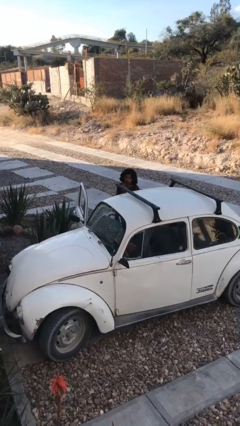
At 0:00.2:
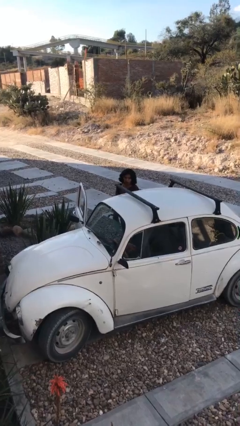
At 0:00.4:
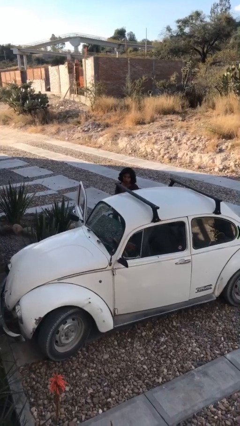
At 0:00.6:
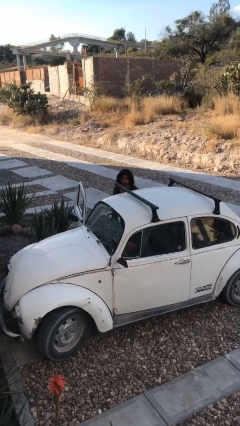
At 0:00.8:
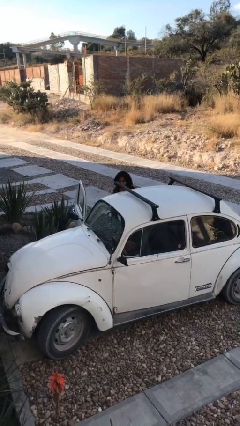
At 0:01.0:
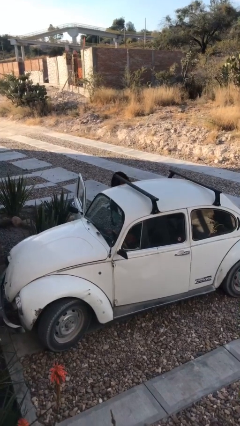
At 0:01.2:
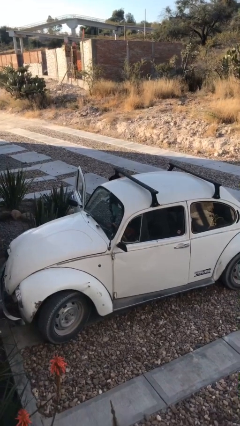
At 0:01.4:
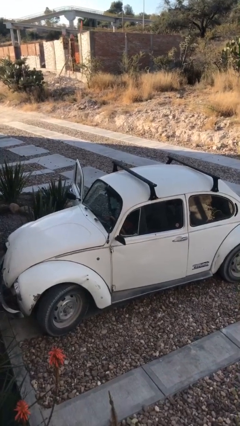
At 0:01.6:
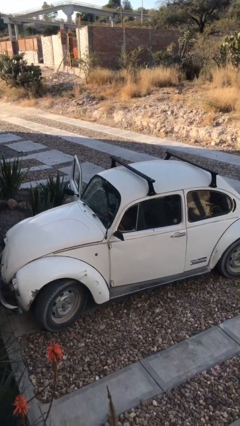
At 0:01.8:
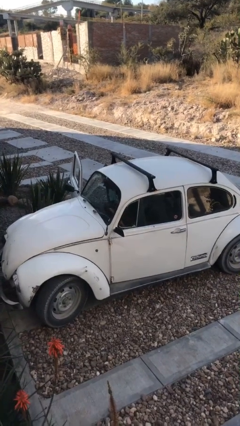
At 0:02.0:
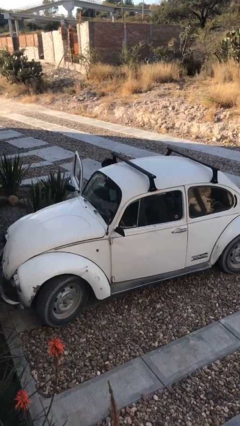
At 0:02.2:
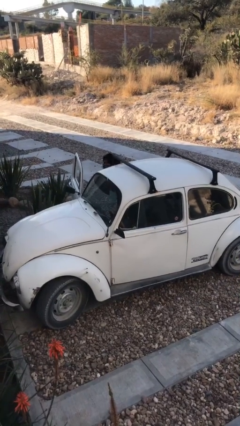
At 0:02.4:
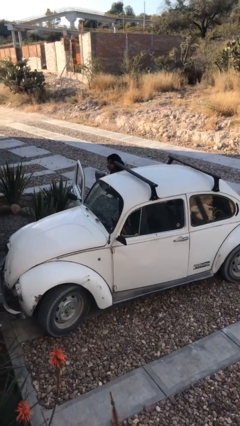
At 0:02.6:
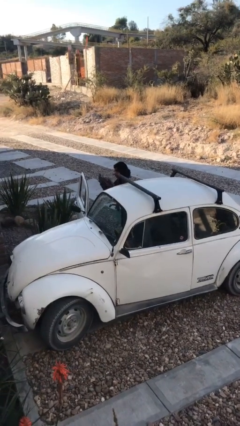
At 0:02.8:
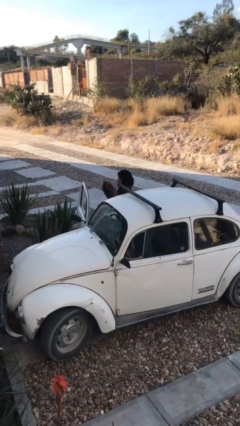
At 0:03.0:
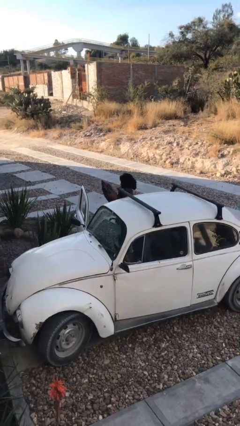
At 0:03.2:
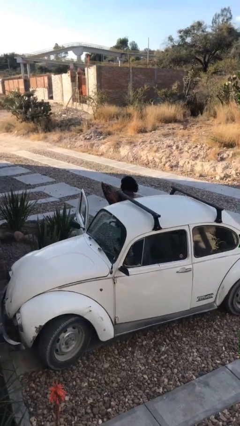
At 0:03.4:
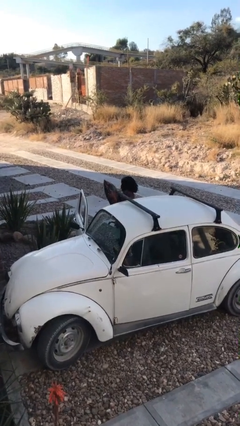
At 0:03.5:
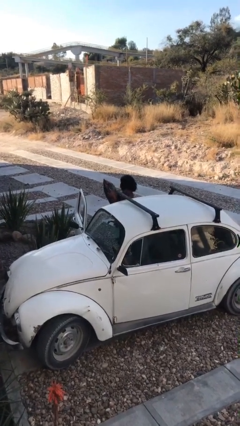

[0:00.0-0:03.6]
person unloads car

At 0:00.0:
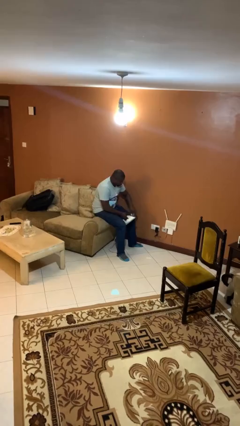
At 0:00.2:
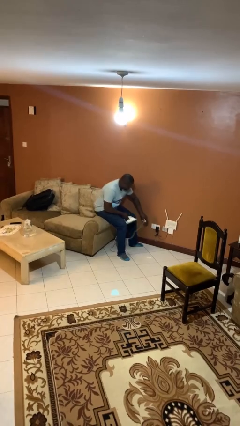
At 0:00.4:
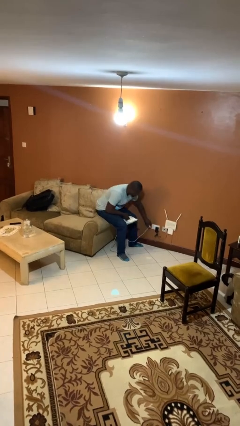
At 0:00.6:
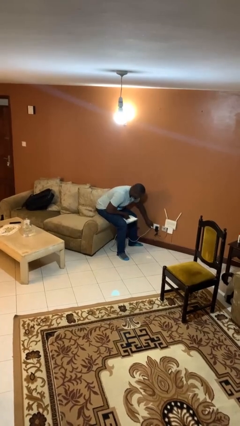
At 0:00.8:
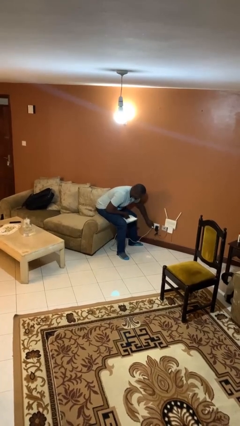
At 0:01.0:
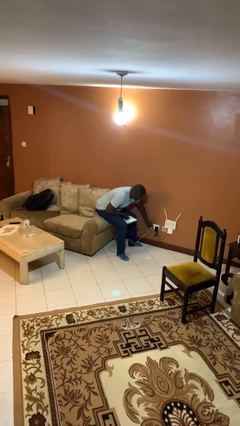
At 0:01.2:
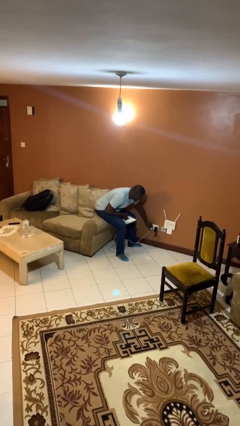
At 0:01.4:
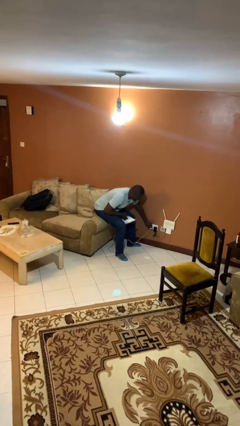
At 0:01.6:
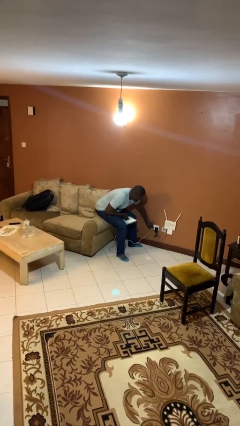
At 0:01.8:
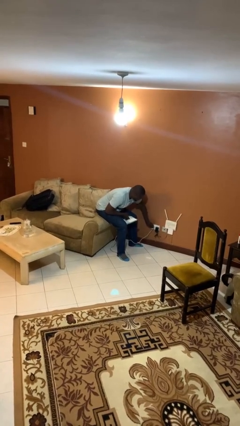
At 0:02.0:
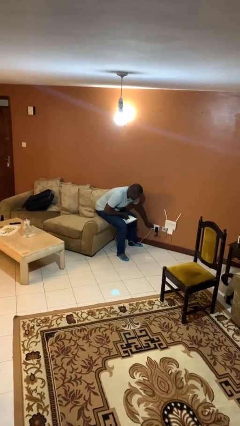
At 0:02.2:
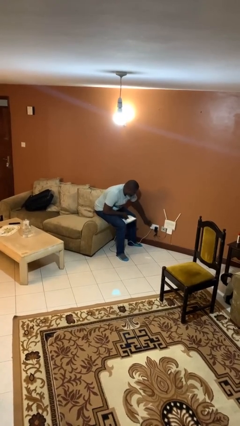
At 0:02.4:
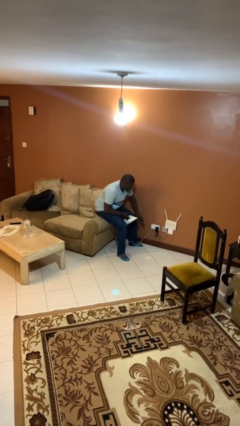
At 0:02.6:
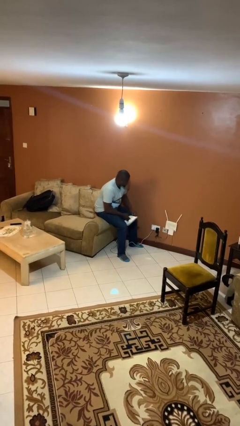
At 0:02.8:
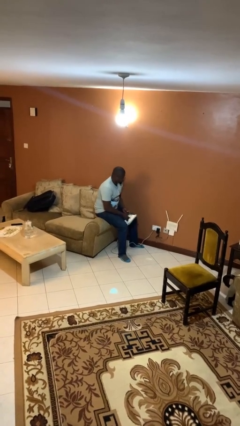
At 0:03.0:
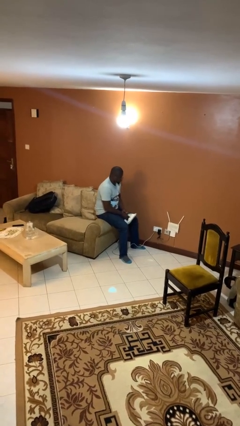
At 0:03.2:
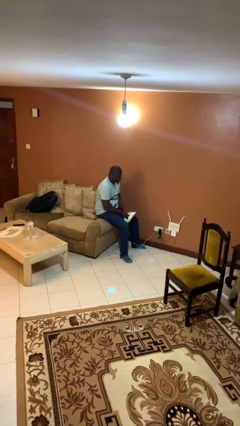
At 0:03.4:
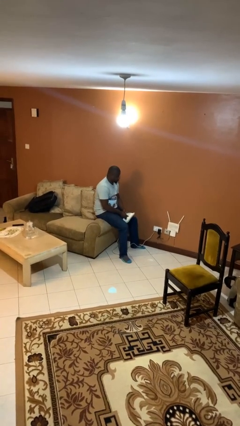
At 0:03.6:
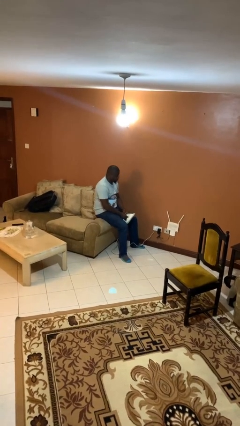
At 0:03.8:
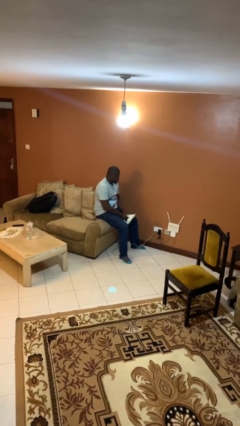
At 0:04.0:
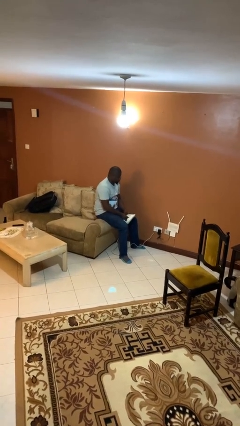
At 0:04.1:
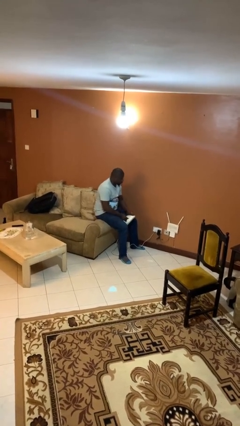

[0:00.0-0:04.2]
person plugs into electrical socket

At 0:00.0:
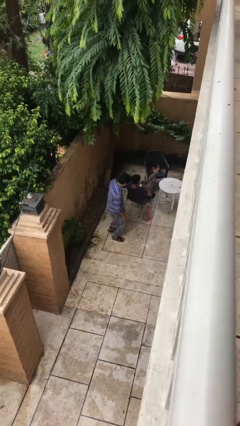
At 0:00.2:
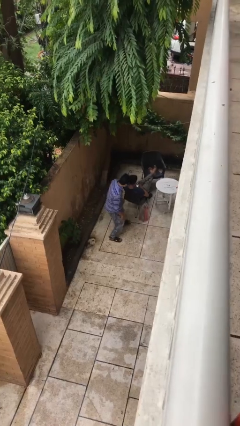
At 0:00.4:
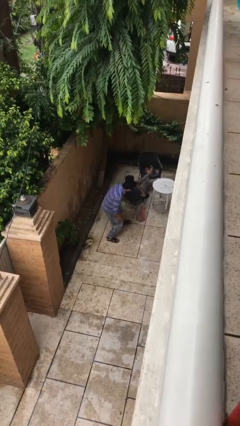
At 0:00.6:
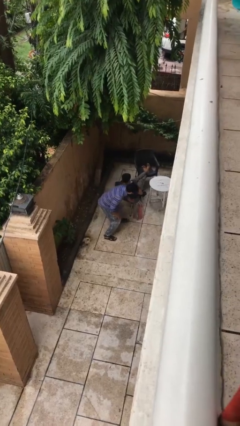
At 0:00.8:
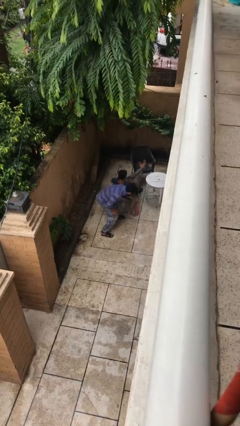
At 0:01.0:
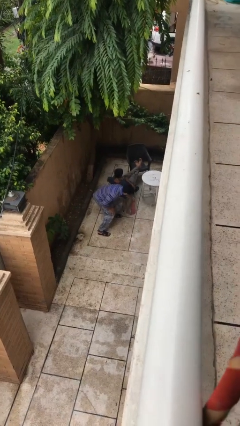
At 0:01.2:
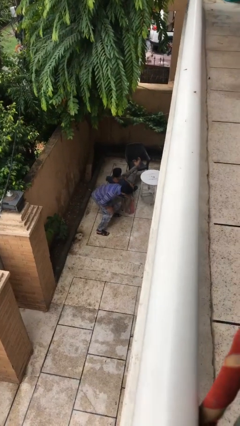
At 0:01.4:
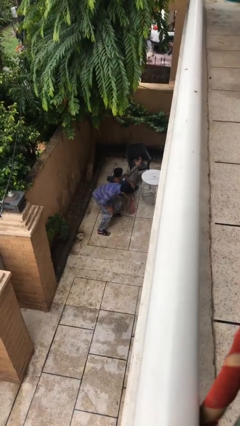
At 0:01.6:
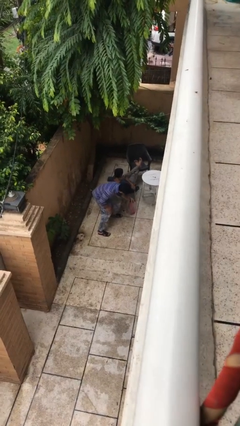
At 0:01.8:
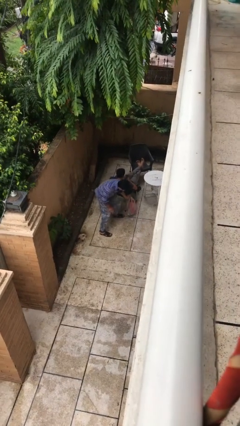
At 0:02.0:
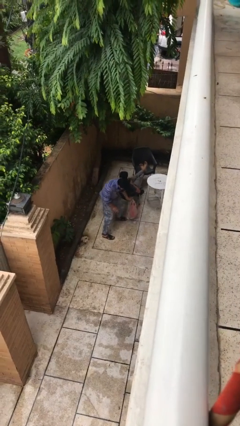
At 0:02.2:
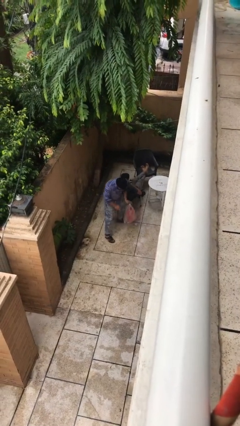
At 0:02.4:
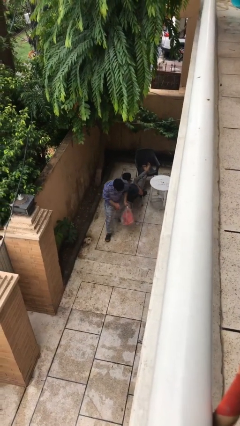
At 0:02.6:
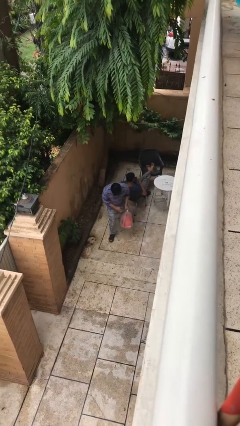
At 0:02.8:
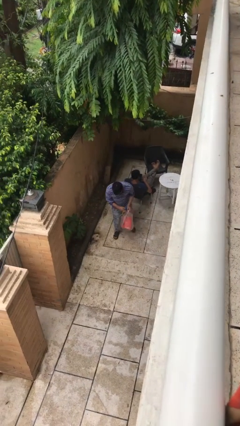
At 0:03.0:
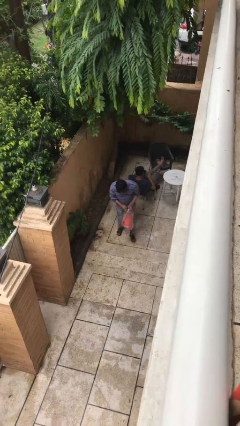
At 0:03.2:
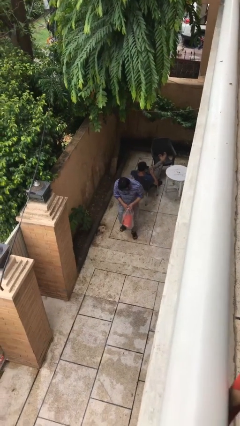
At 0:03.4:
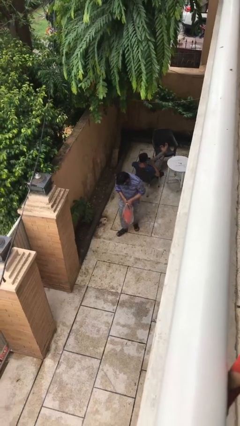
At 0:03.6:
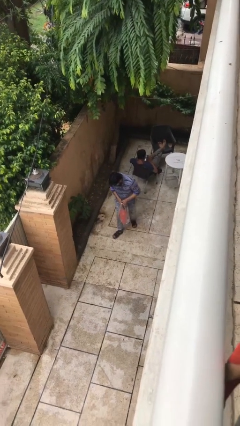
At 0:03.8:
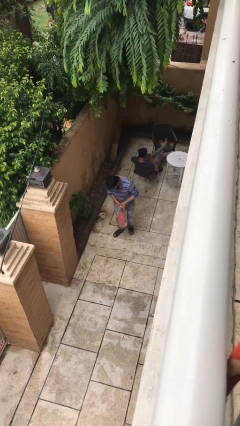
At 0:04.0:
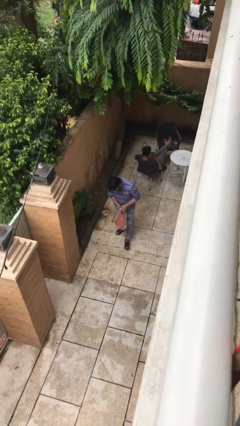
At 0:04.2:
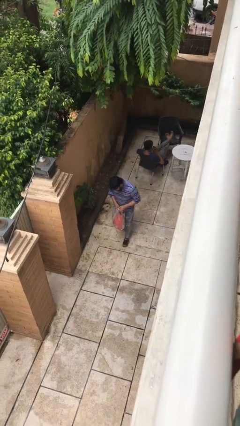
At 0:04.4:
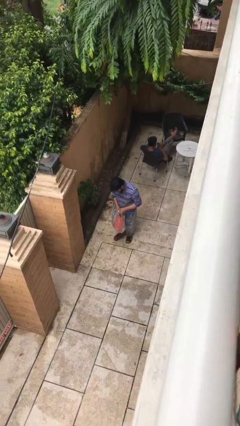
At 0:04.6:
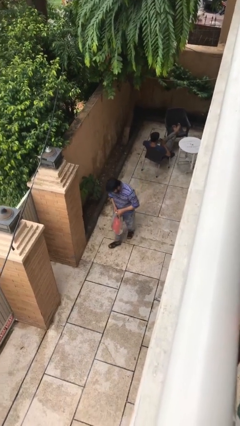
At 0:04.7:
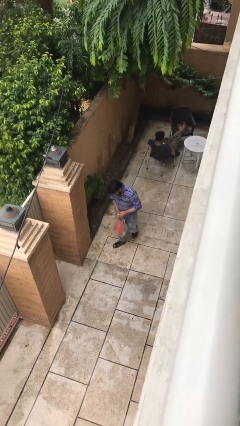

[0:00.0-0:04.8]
person steals object from person

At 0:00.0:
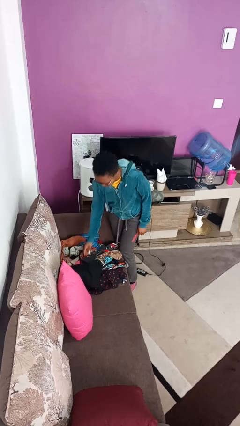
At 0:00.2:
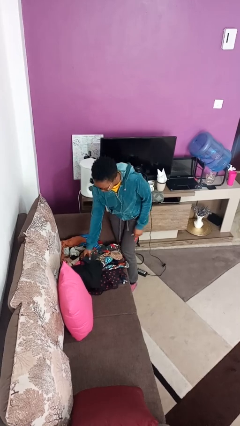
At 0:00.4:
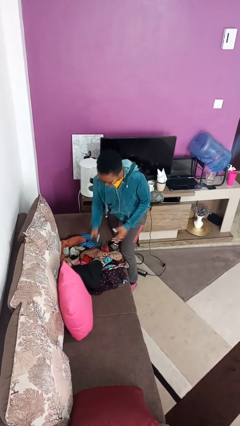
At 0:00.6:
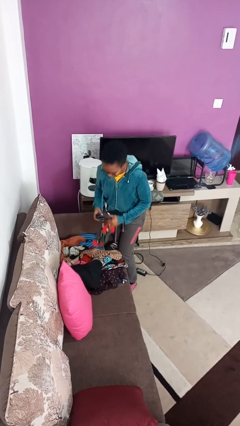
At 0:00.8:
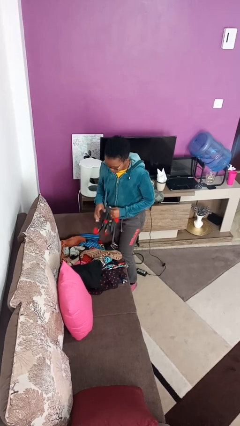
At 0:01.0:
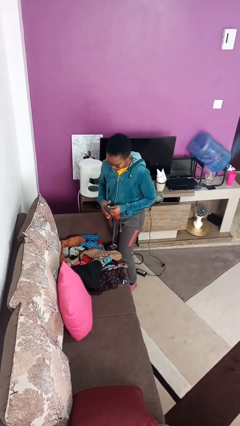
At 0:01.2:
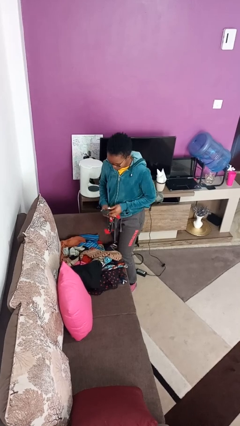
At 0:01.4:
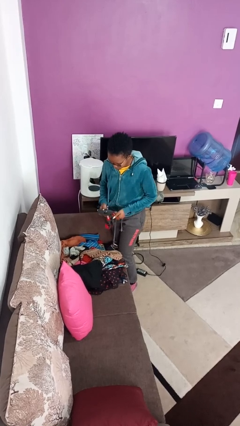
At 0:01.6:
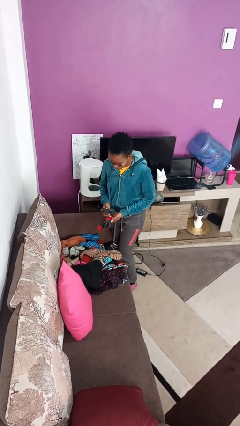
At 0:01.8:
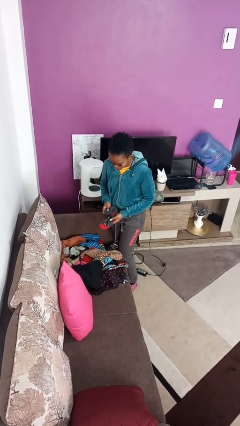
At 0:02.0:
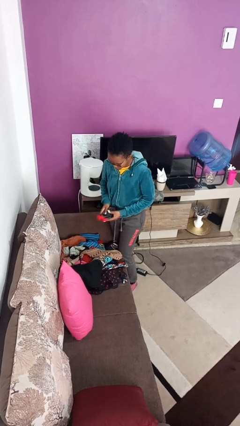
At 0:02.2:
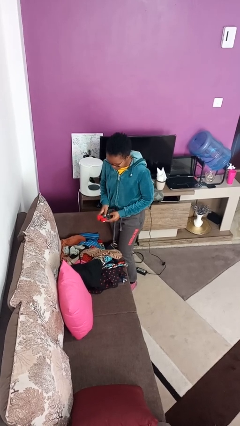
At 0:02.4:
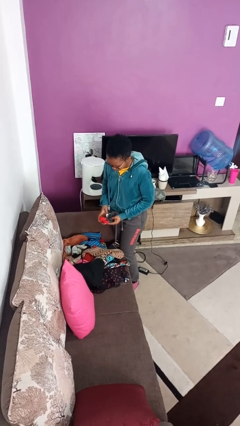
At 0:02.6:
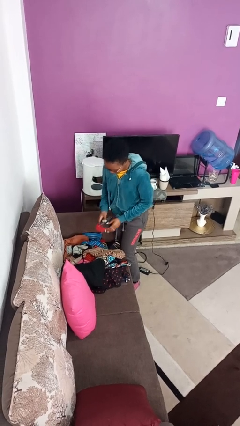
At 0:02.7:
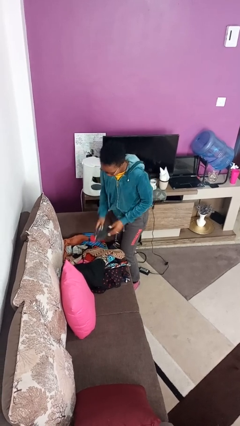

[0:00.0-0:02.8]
person folds socks

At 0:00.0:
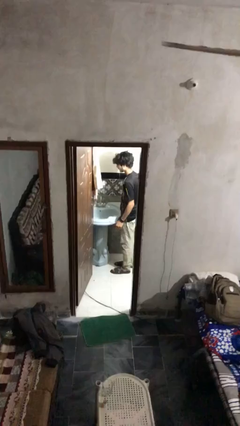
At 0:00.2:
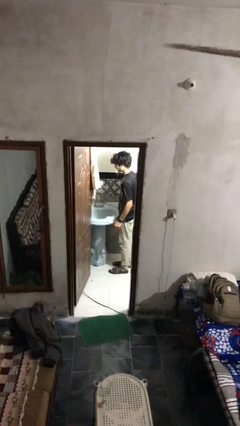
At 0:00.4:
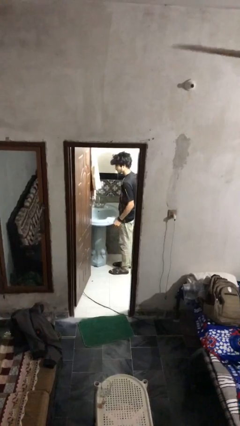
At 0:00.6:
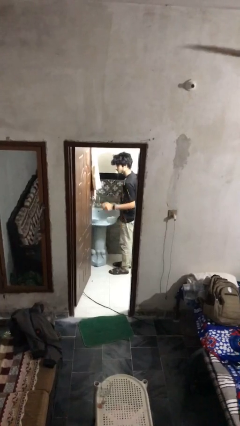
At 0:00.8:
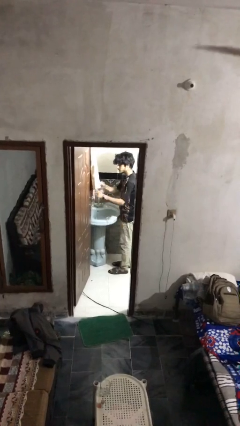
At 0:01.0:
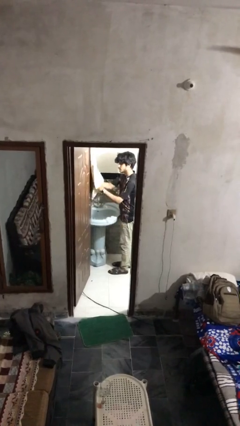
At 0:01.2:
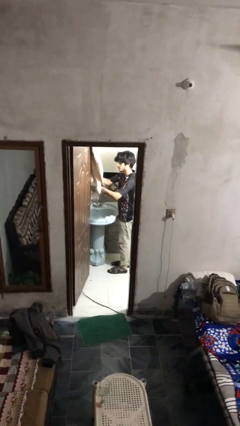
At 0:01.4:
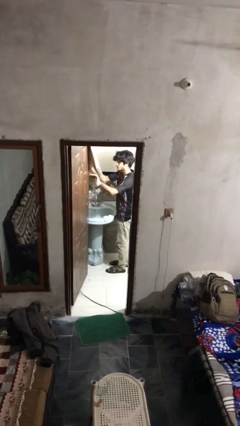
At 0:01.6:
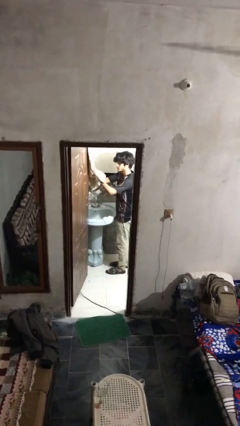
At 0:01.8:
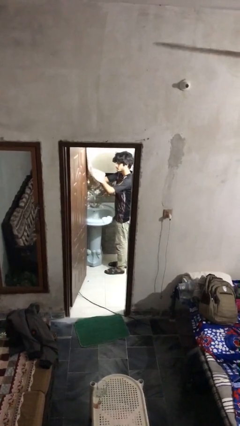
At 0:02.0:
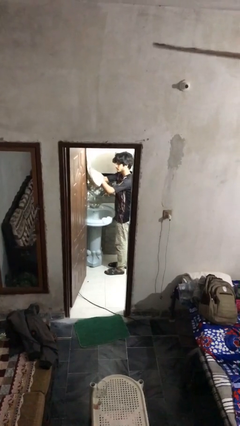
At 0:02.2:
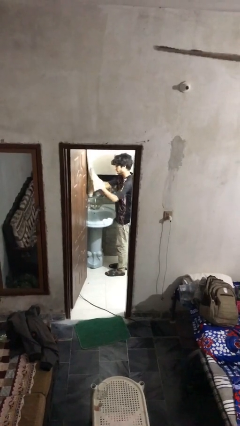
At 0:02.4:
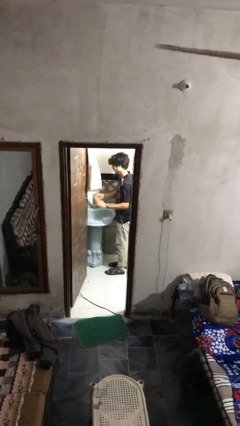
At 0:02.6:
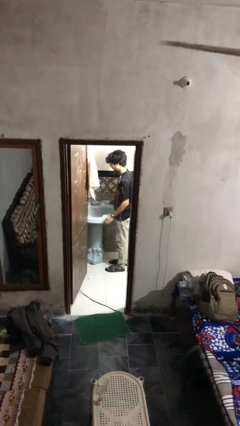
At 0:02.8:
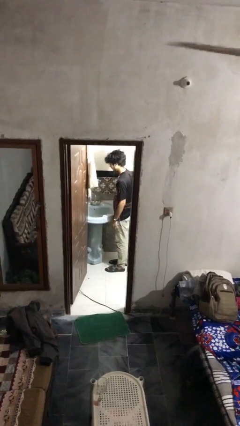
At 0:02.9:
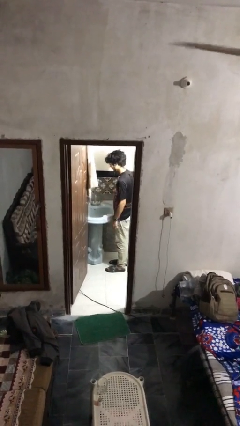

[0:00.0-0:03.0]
person dries hands with towel
